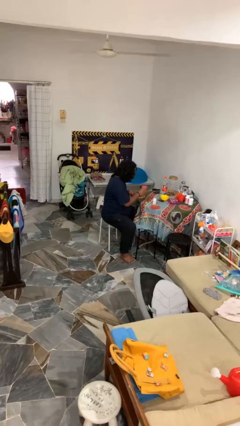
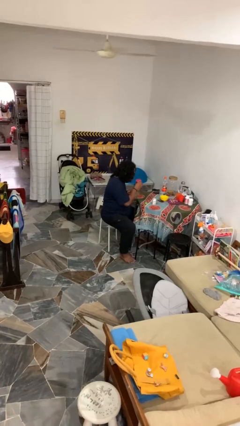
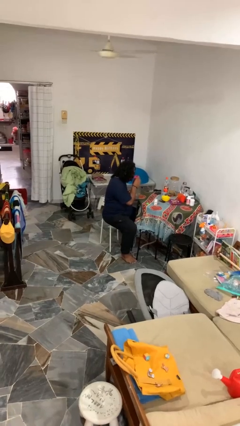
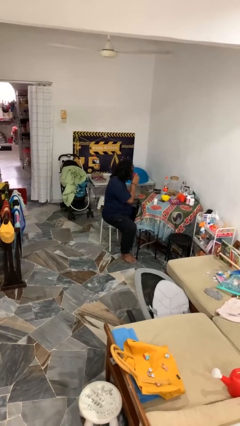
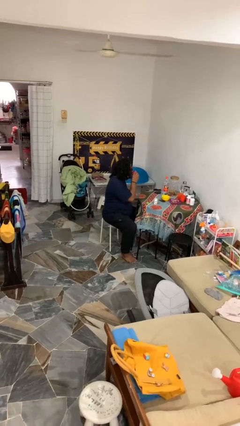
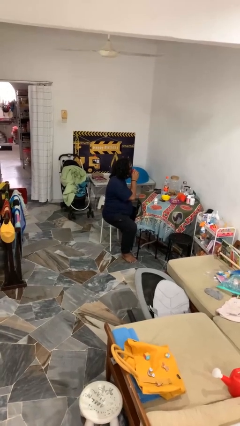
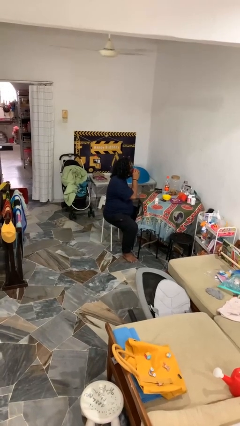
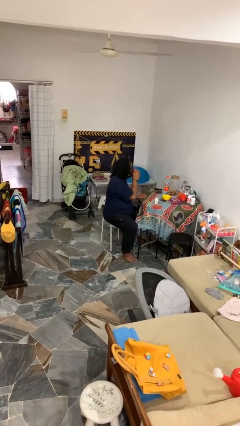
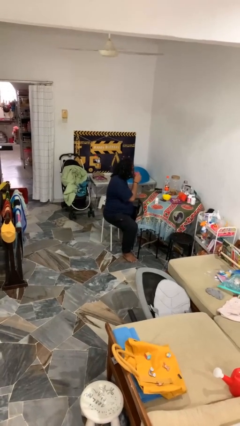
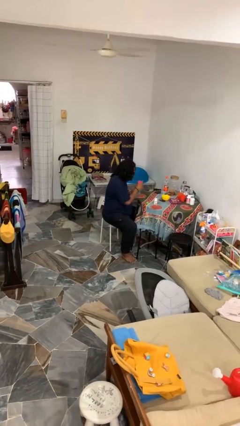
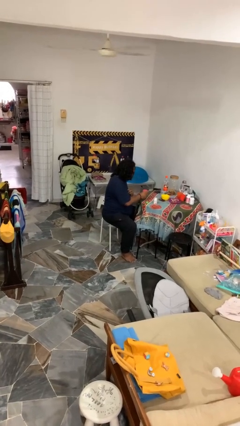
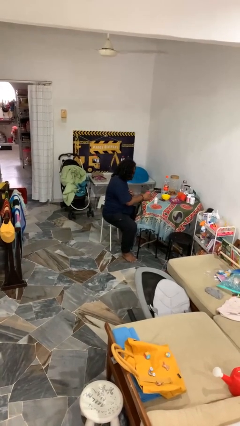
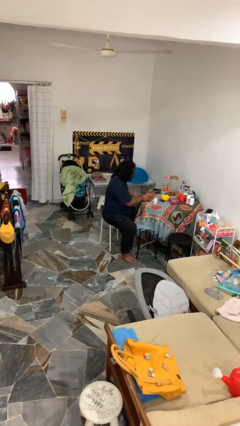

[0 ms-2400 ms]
person drinks from cup

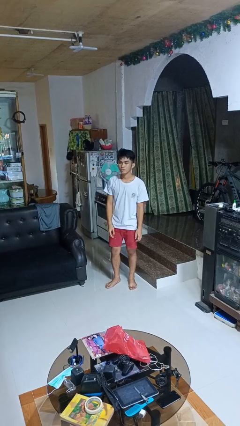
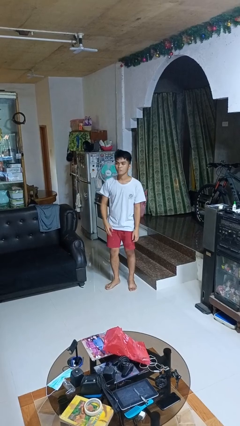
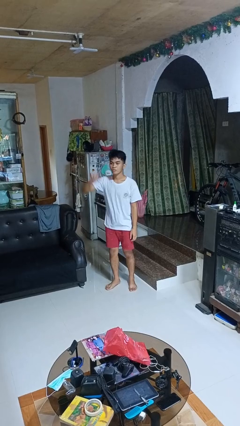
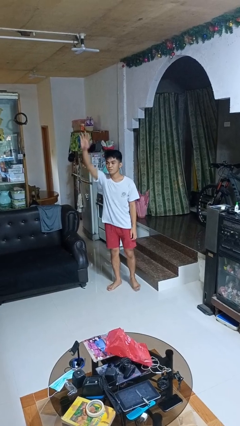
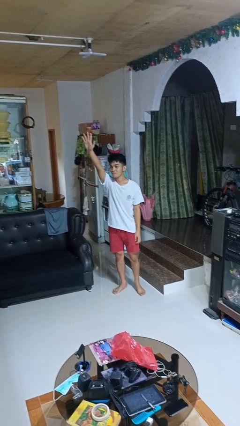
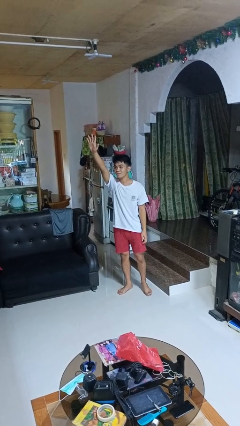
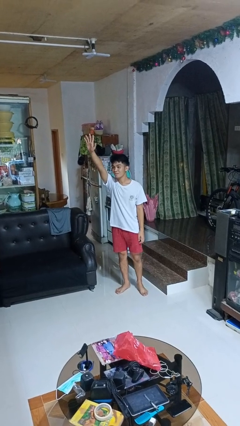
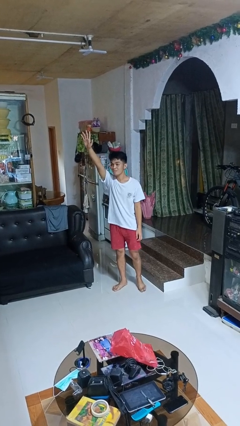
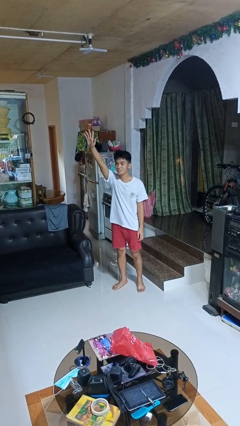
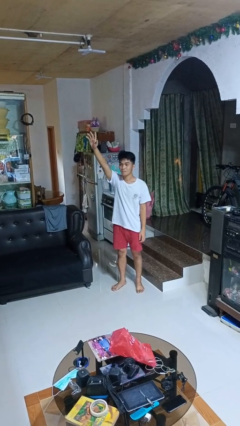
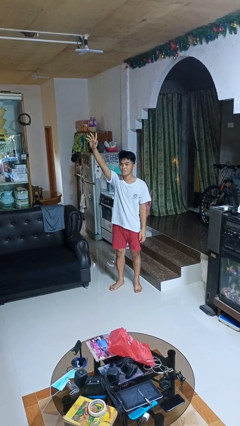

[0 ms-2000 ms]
person gestures raise hand

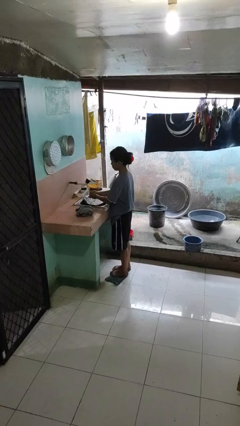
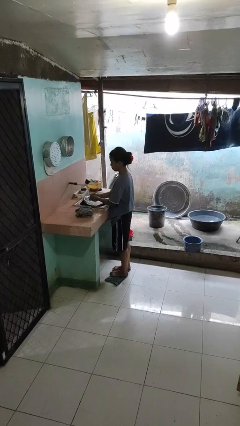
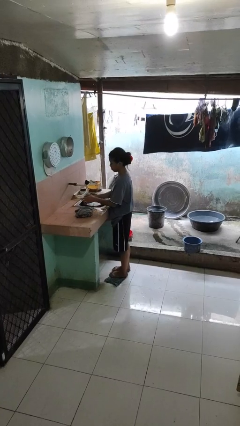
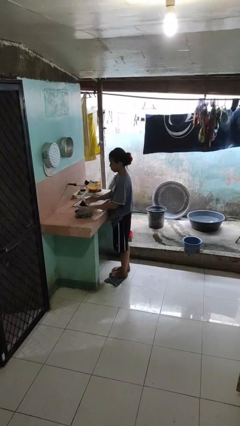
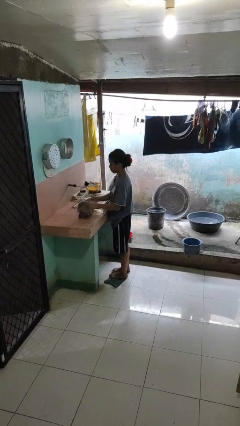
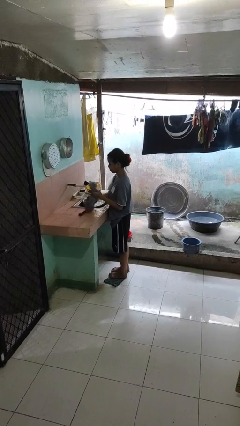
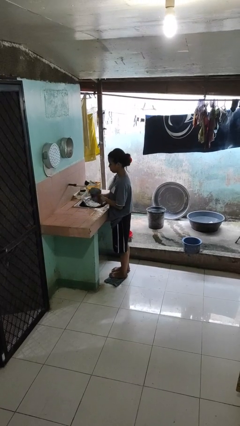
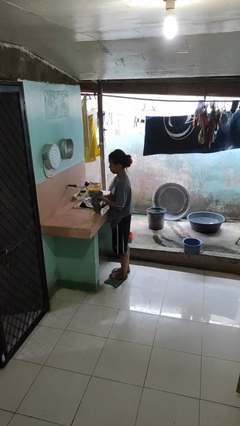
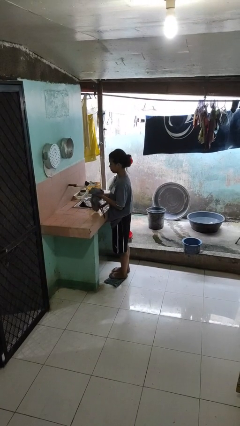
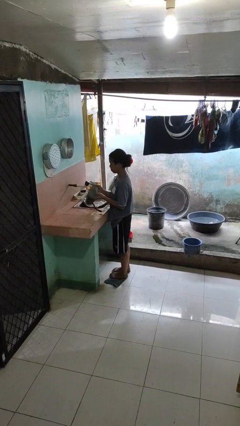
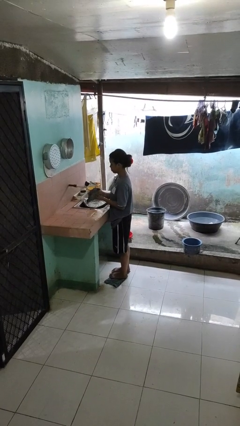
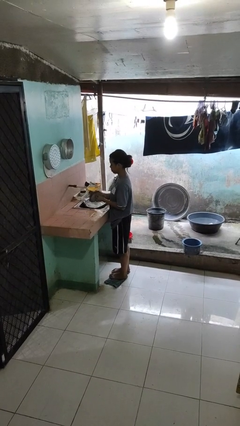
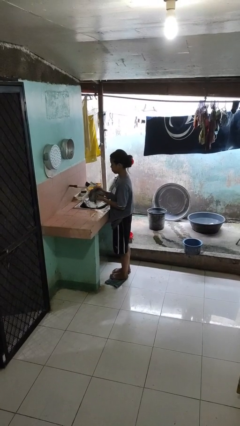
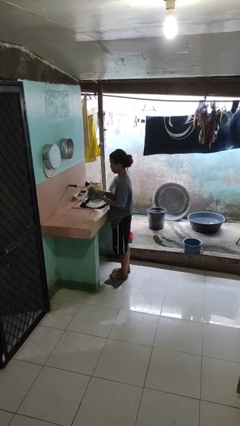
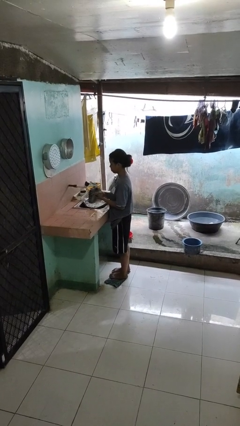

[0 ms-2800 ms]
person dries hands with towel

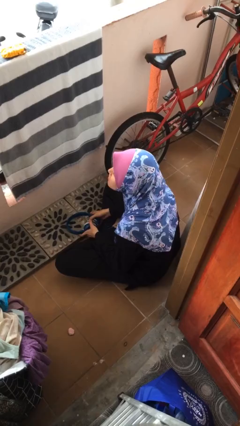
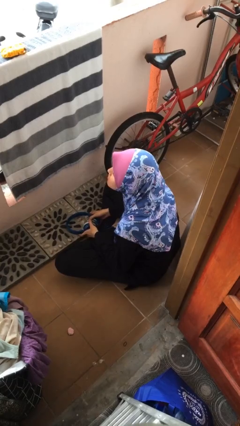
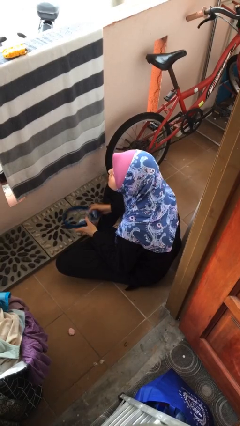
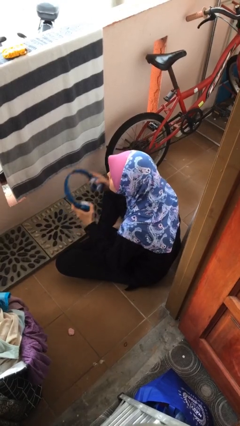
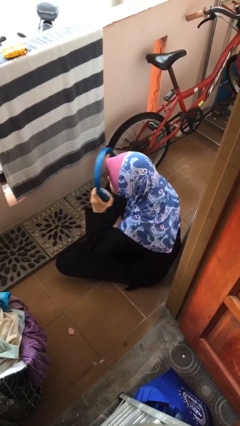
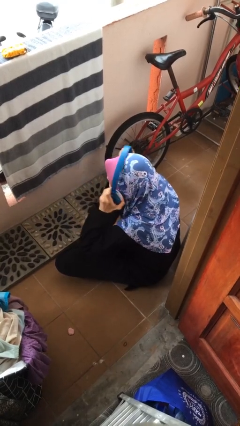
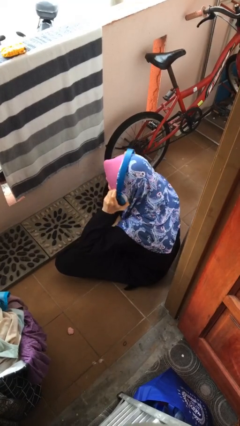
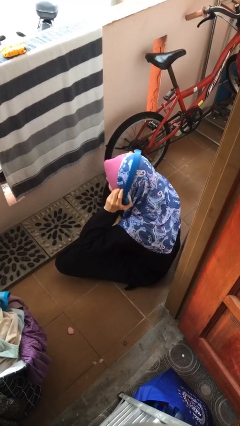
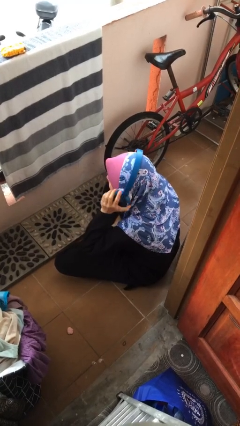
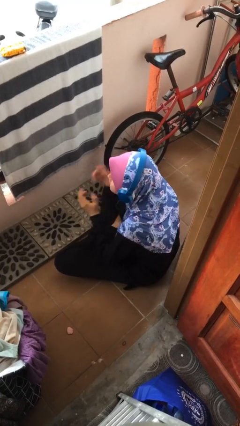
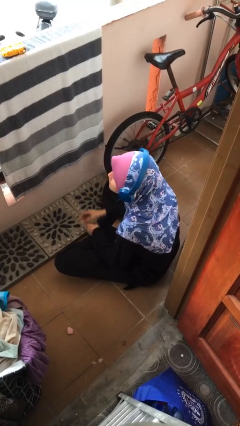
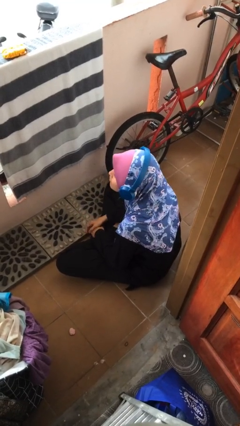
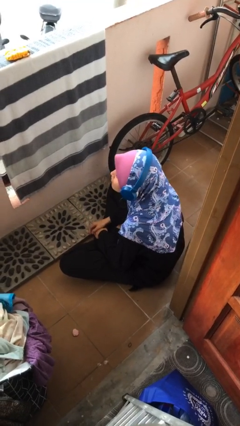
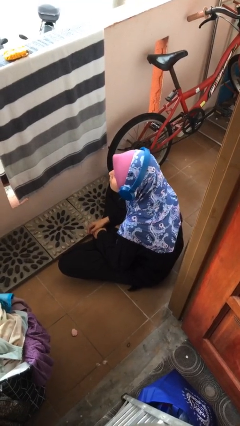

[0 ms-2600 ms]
person puts on headphones

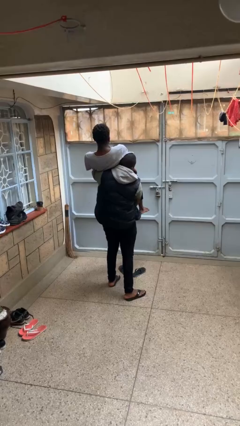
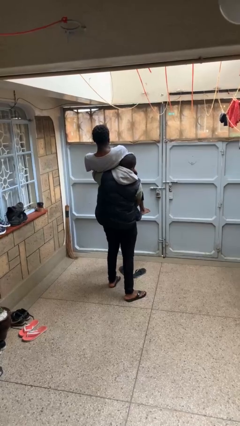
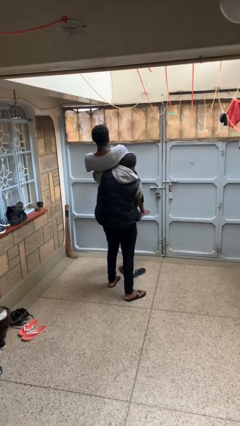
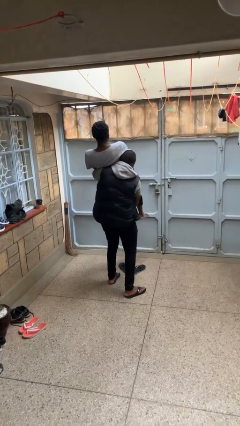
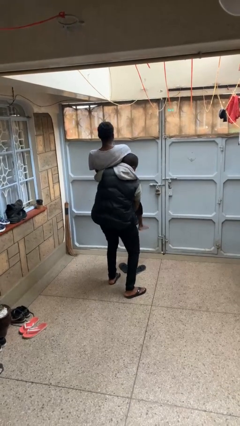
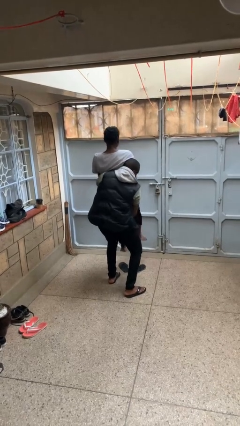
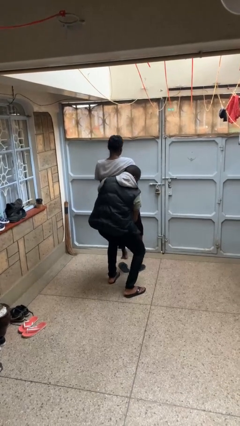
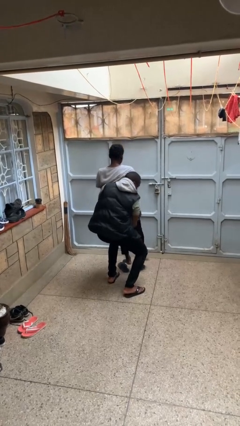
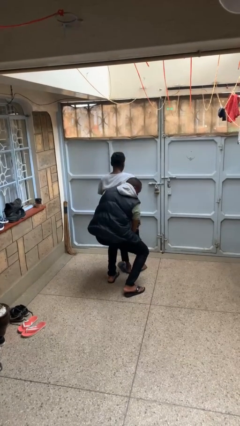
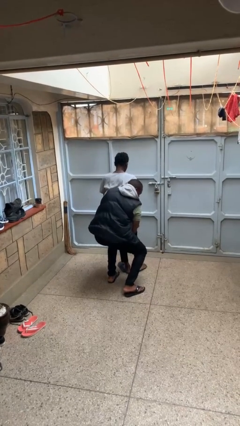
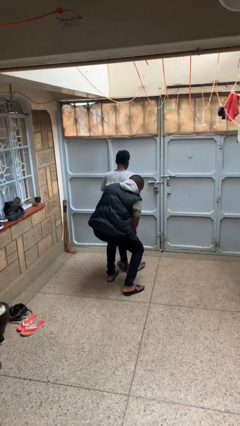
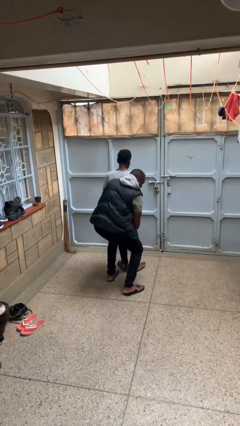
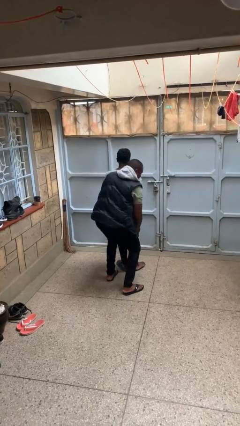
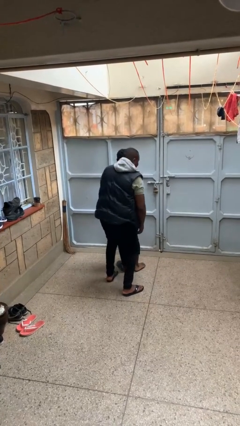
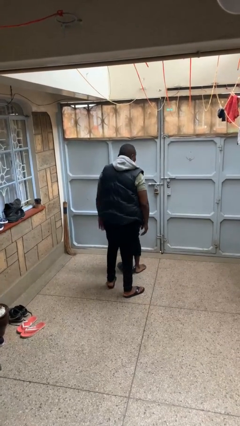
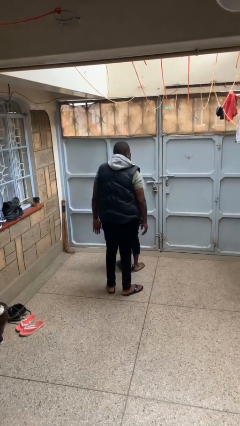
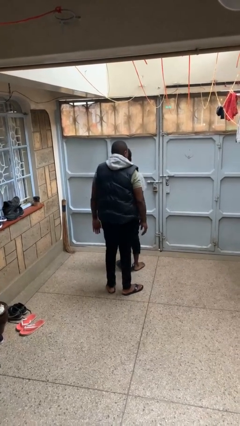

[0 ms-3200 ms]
person puts down person

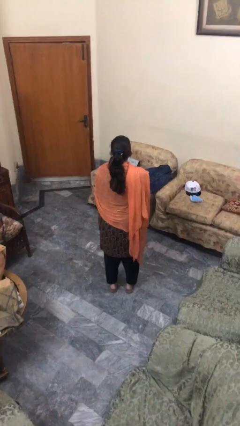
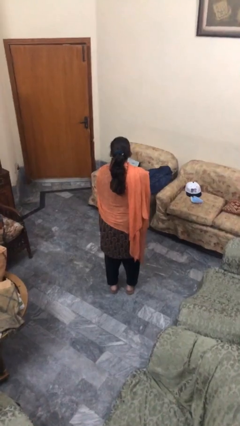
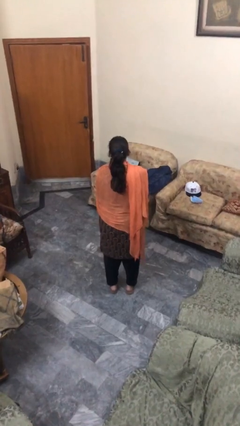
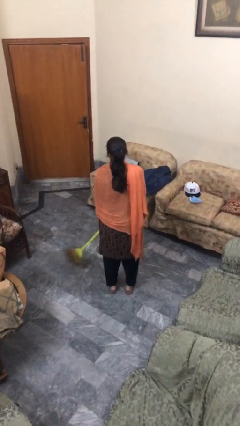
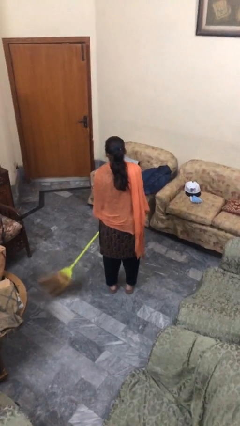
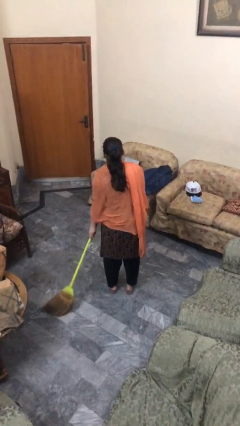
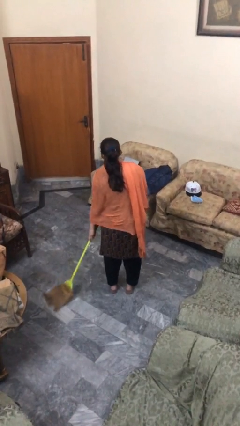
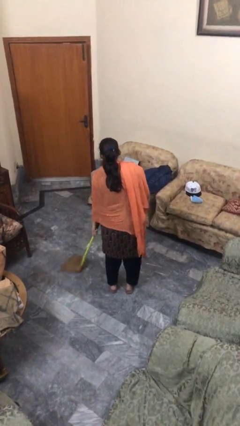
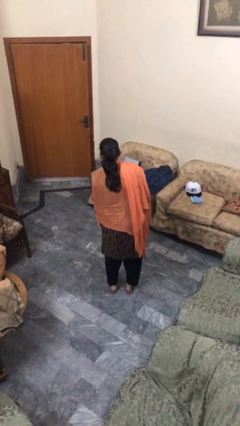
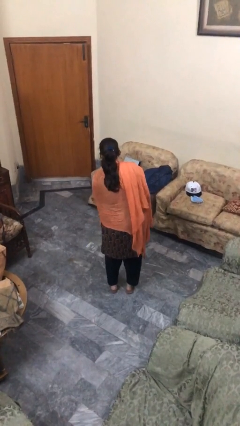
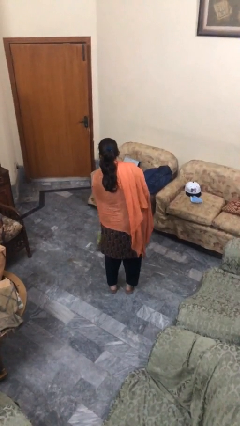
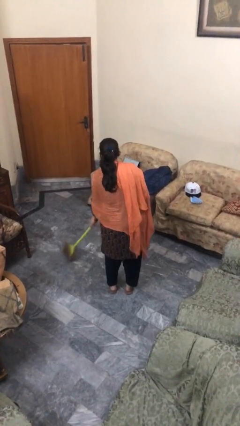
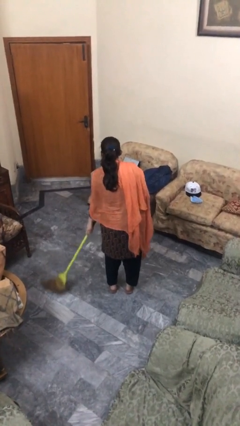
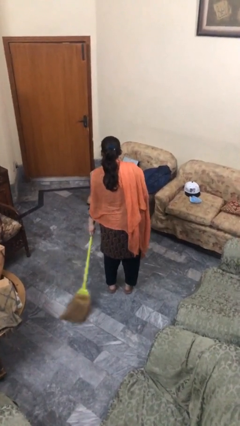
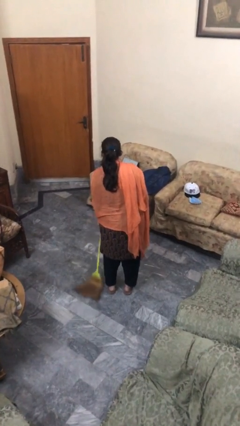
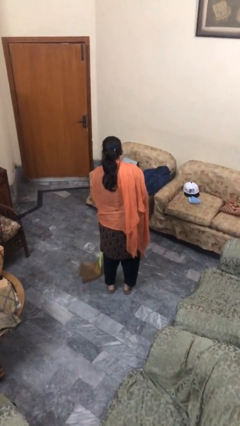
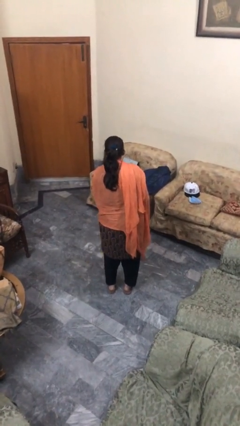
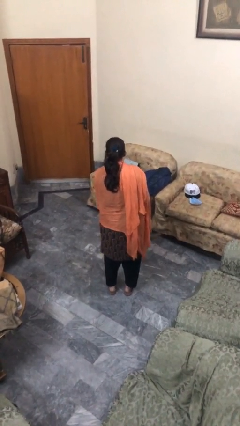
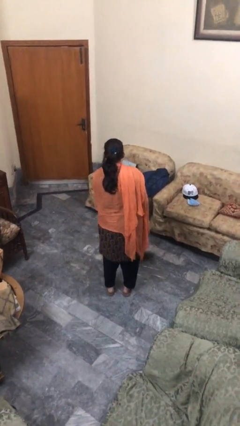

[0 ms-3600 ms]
person sweeps floor

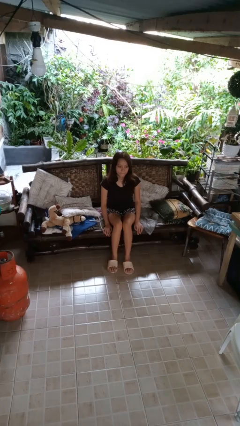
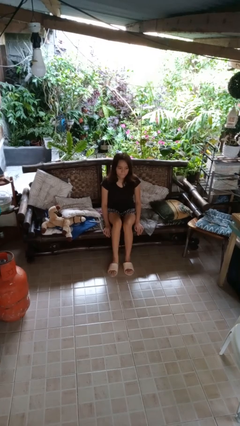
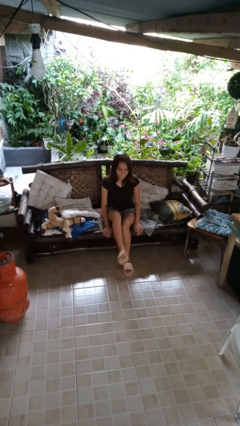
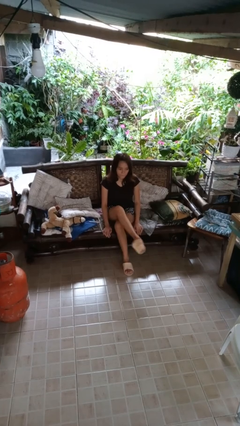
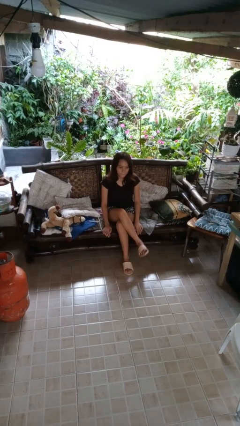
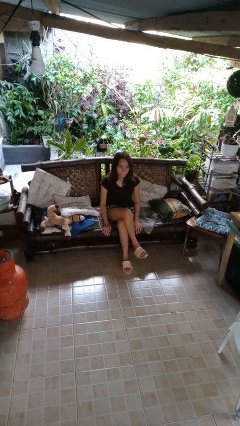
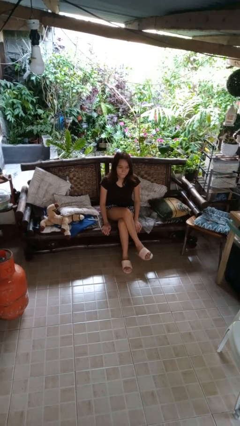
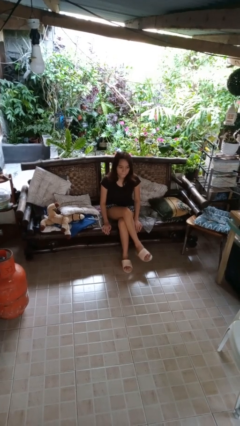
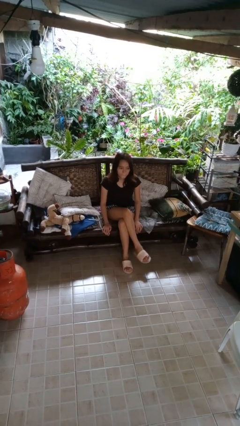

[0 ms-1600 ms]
person crosses legs
